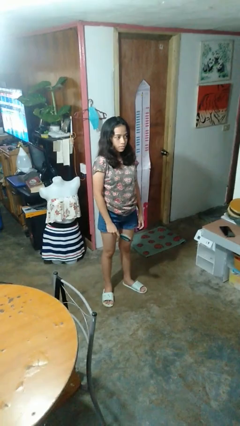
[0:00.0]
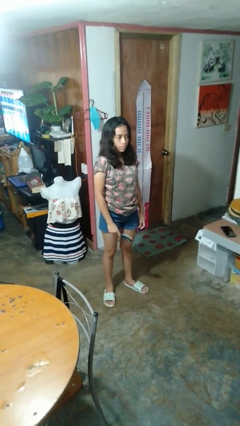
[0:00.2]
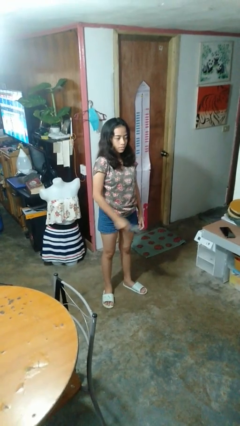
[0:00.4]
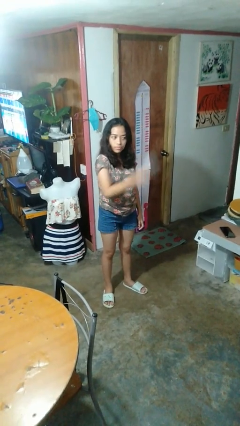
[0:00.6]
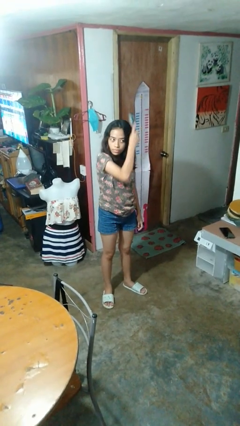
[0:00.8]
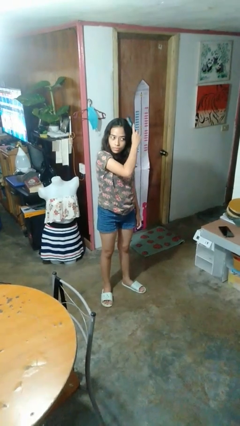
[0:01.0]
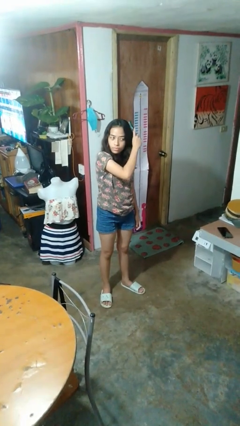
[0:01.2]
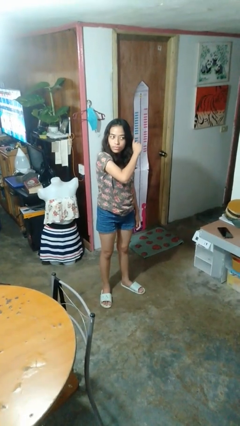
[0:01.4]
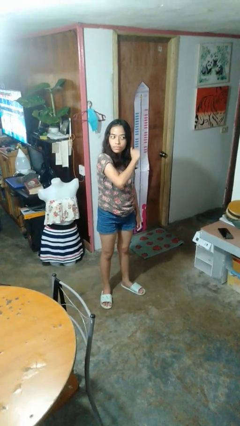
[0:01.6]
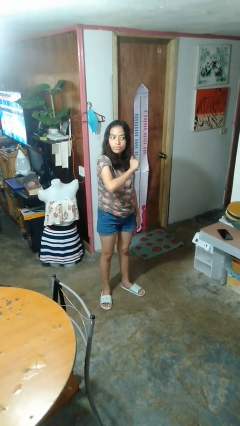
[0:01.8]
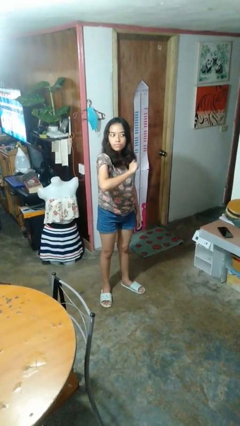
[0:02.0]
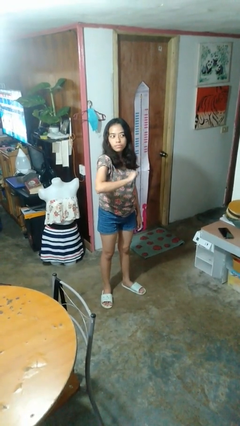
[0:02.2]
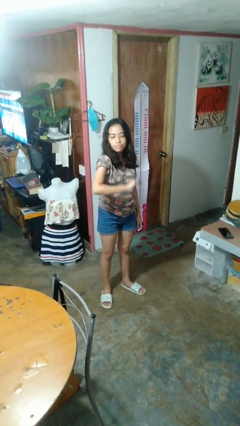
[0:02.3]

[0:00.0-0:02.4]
person brushes hair

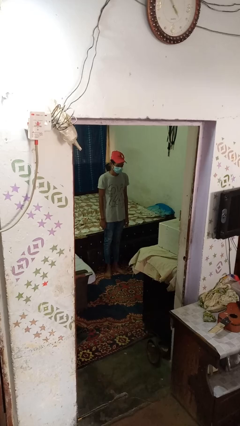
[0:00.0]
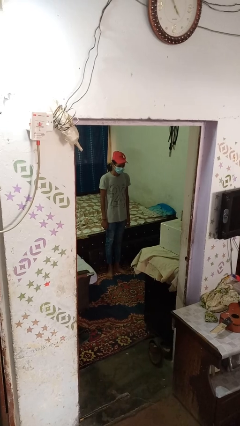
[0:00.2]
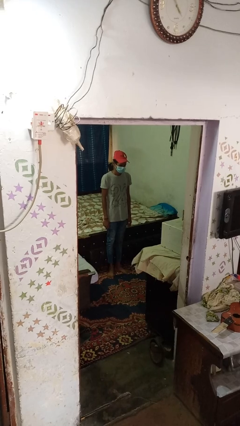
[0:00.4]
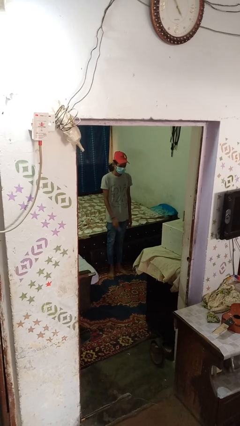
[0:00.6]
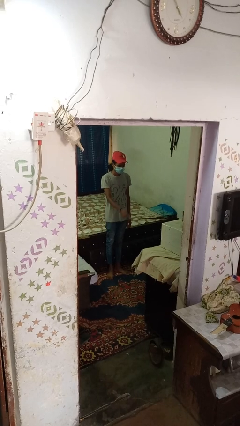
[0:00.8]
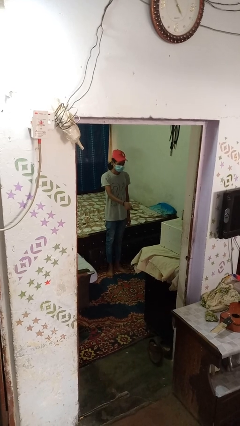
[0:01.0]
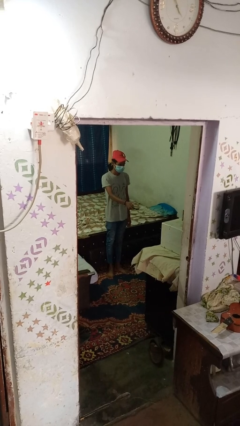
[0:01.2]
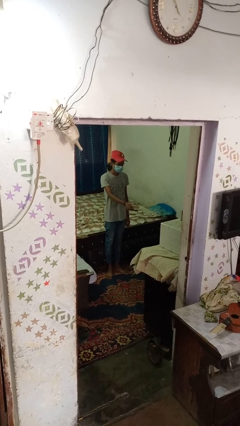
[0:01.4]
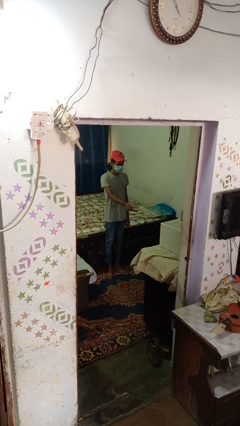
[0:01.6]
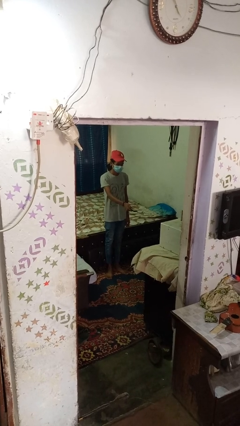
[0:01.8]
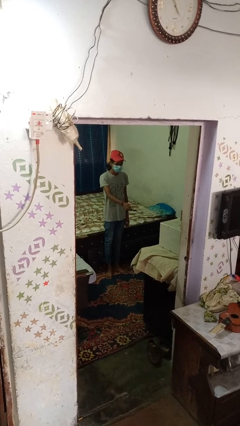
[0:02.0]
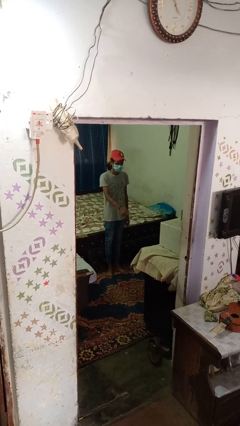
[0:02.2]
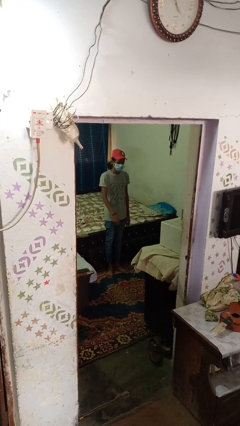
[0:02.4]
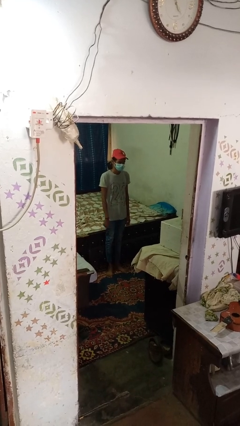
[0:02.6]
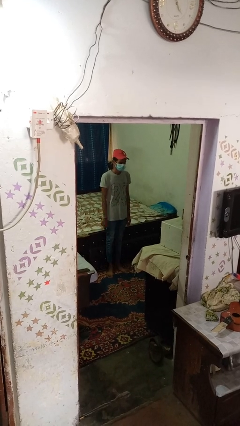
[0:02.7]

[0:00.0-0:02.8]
person uses television remote

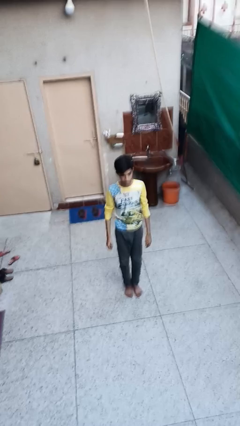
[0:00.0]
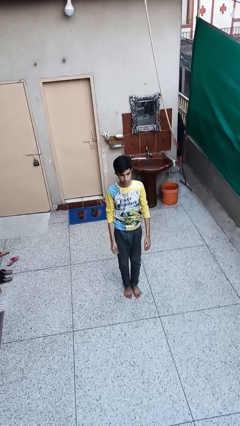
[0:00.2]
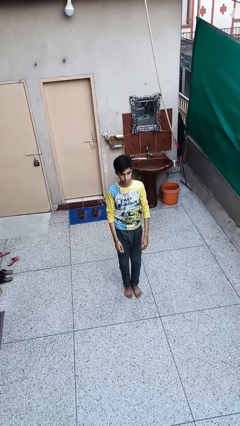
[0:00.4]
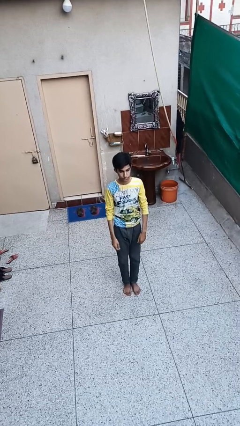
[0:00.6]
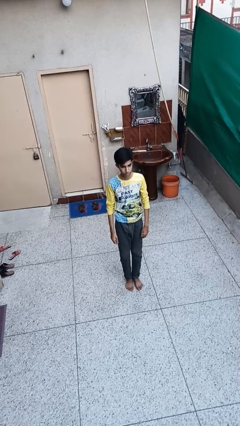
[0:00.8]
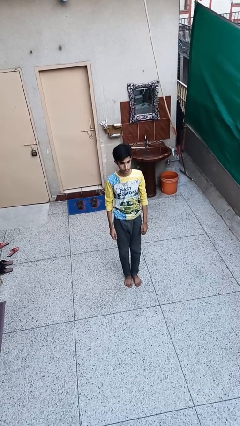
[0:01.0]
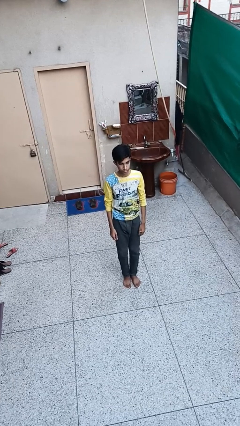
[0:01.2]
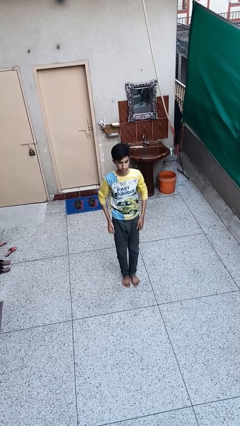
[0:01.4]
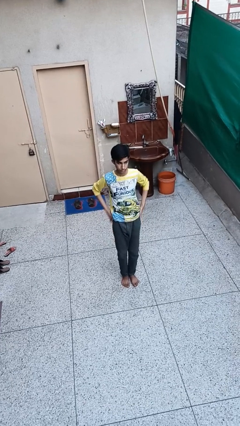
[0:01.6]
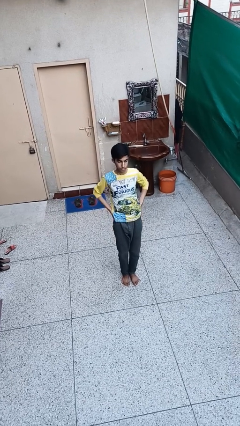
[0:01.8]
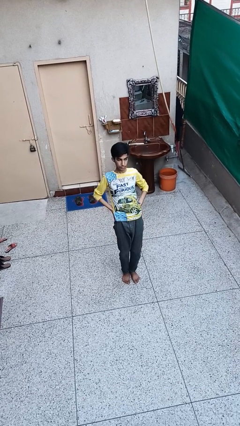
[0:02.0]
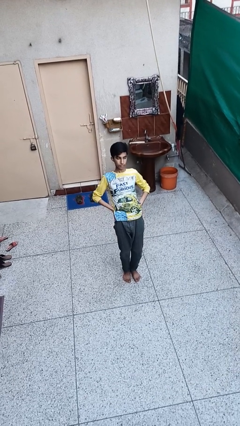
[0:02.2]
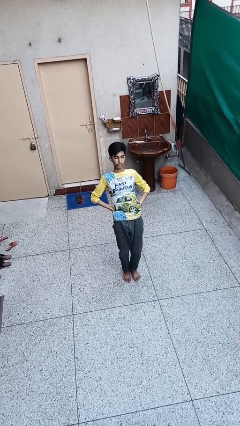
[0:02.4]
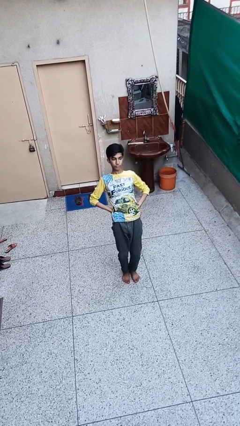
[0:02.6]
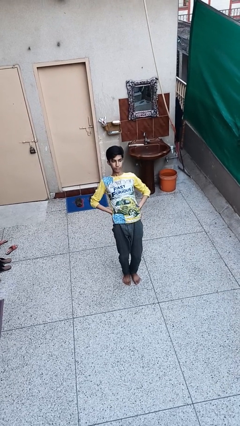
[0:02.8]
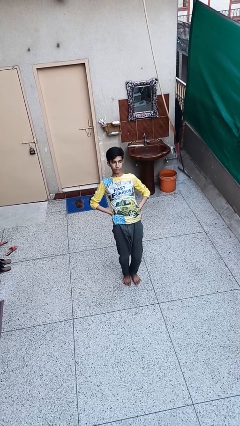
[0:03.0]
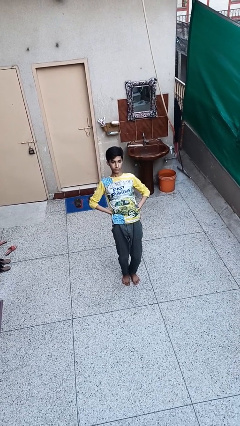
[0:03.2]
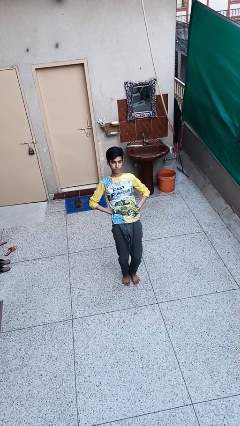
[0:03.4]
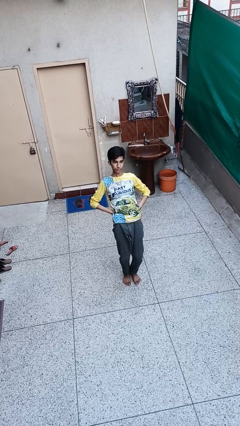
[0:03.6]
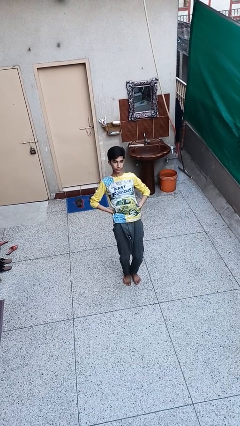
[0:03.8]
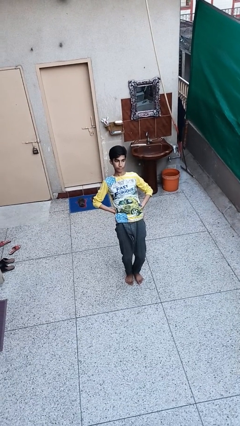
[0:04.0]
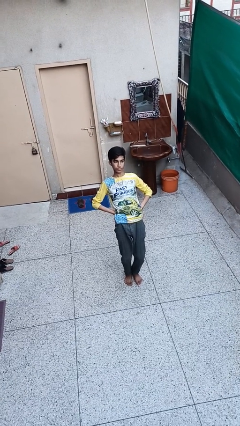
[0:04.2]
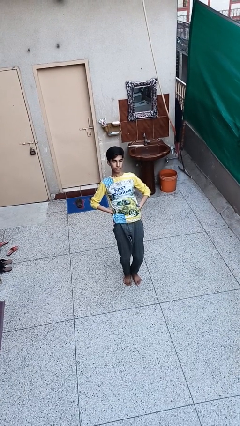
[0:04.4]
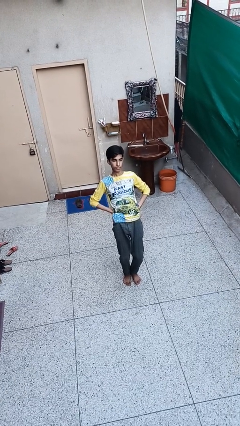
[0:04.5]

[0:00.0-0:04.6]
person stretches back

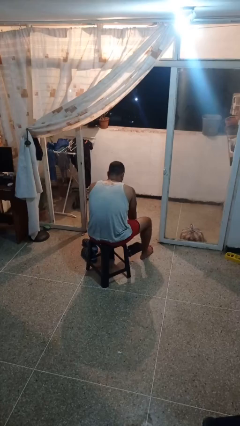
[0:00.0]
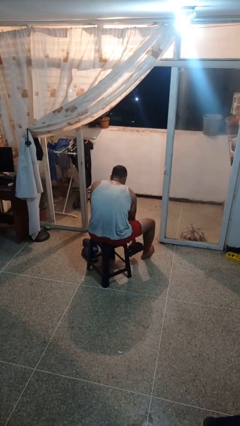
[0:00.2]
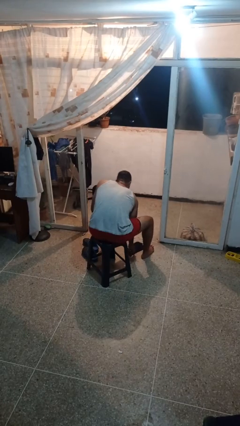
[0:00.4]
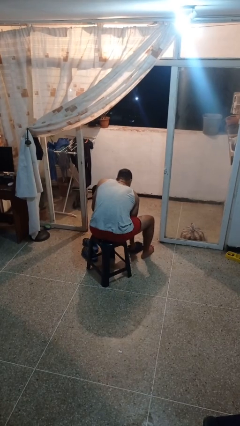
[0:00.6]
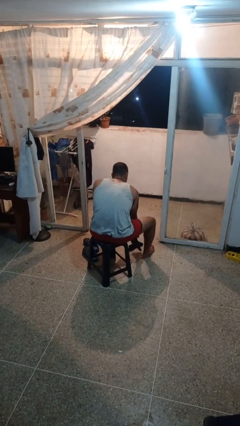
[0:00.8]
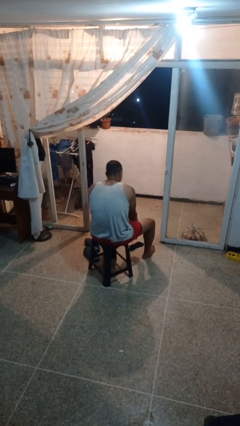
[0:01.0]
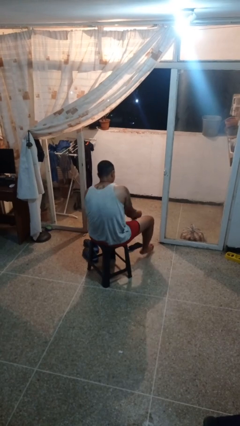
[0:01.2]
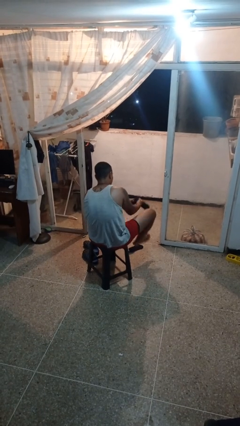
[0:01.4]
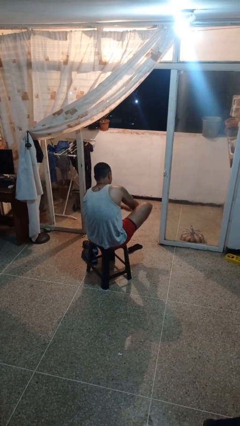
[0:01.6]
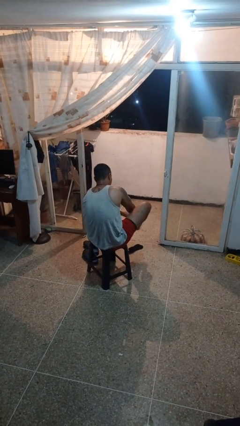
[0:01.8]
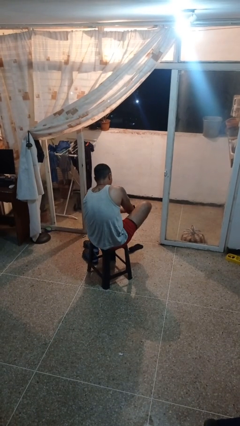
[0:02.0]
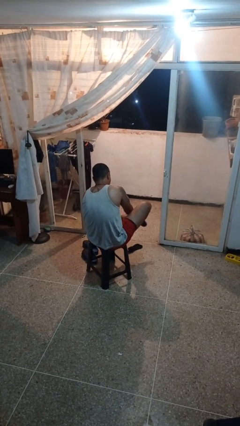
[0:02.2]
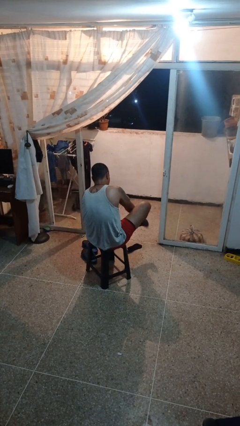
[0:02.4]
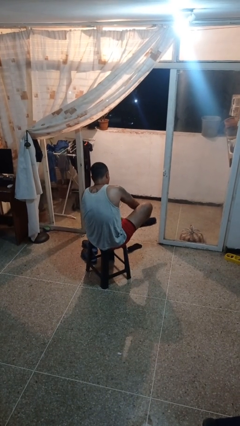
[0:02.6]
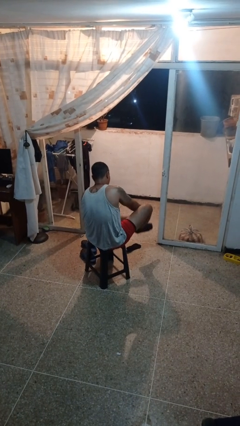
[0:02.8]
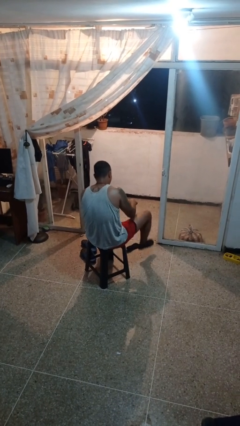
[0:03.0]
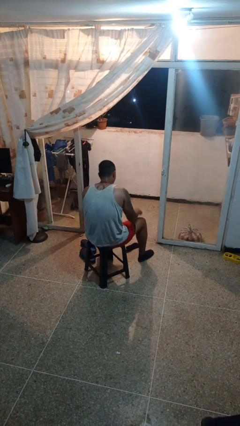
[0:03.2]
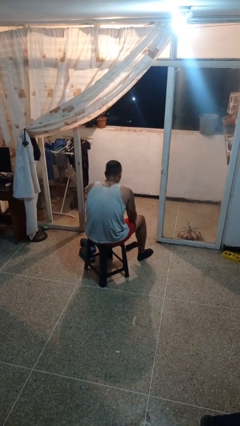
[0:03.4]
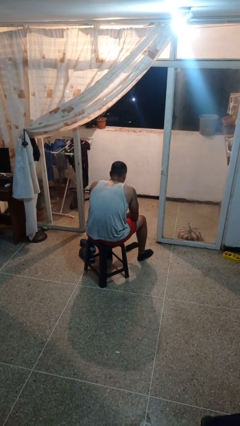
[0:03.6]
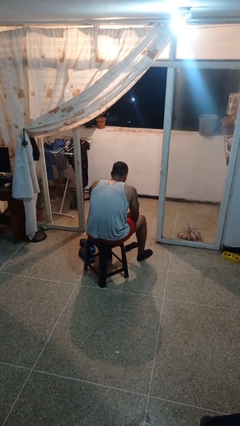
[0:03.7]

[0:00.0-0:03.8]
person puts on socks

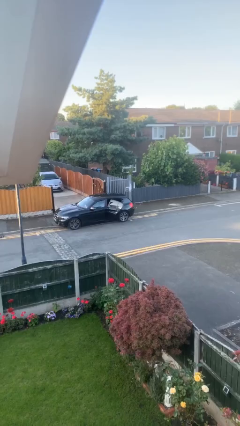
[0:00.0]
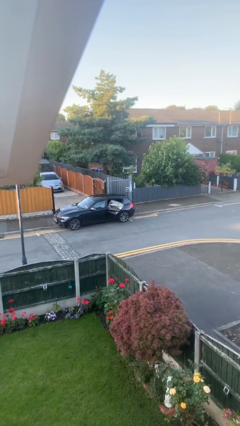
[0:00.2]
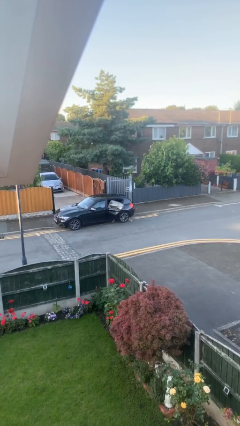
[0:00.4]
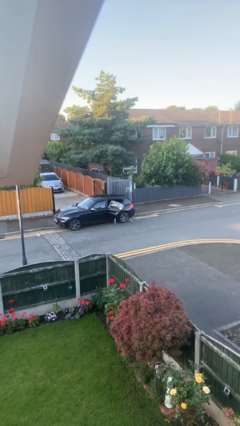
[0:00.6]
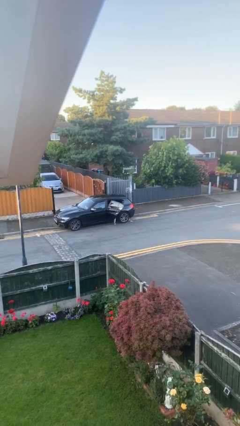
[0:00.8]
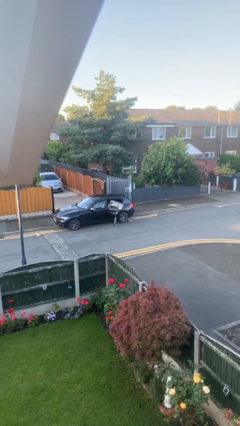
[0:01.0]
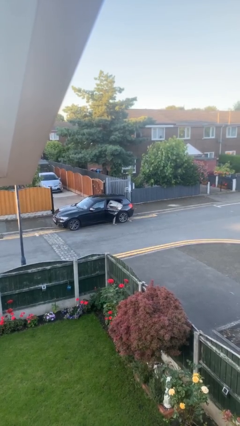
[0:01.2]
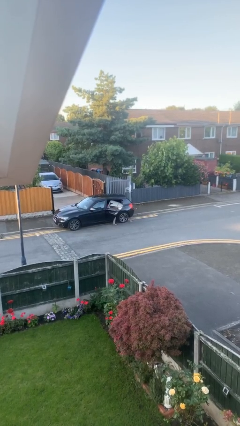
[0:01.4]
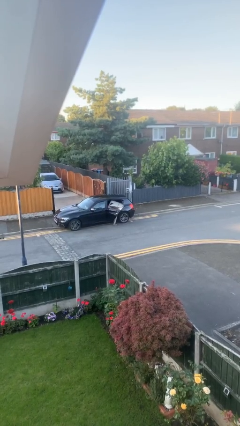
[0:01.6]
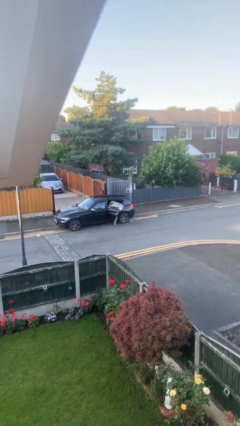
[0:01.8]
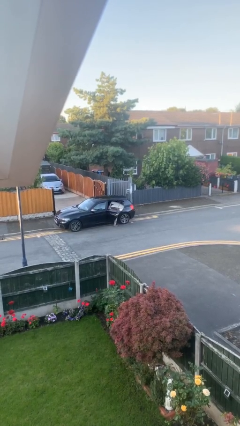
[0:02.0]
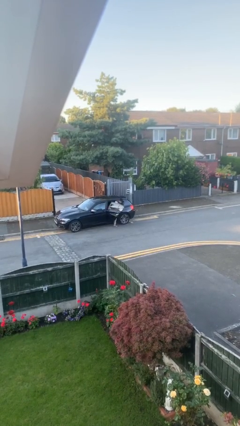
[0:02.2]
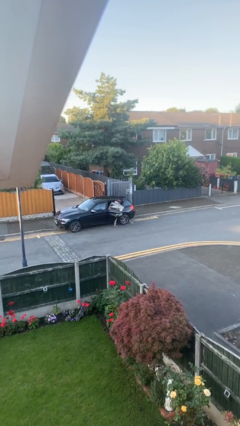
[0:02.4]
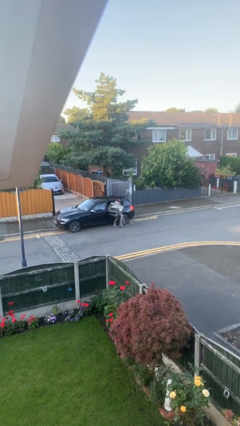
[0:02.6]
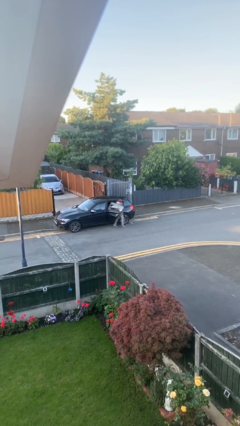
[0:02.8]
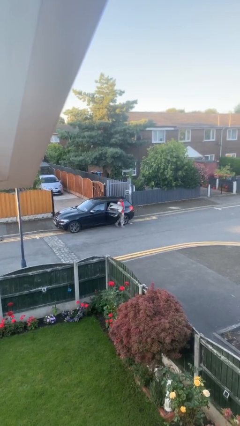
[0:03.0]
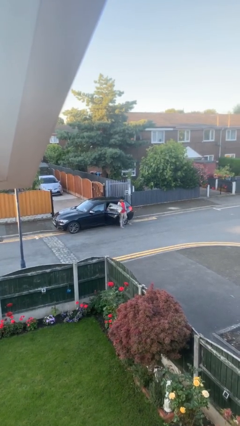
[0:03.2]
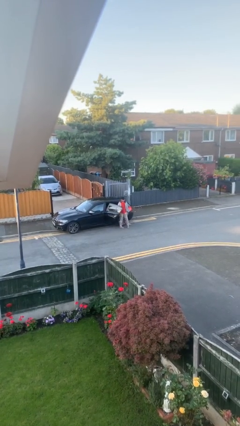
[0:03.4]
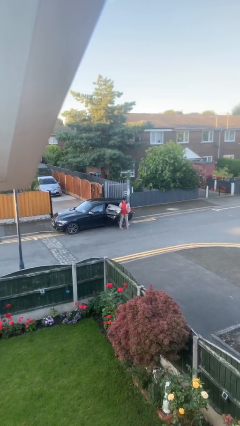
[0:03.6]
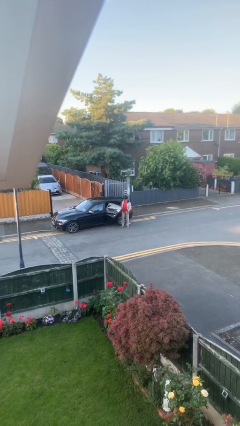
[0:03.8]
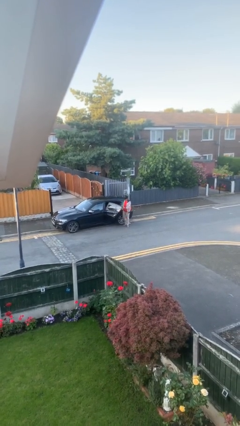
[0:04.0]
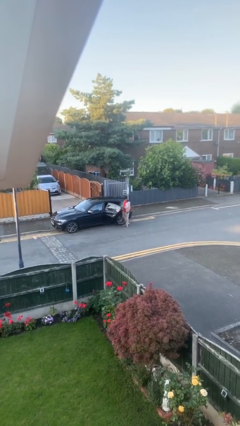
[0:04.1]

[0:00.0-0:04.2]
person exits car
